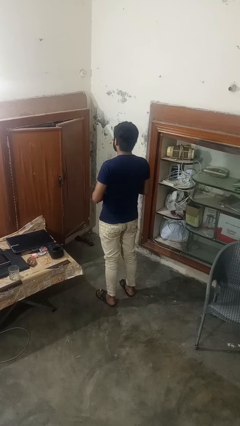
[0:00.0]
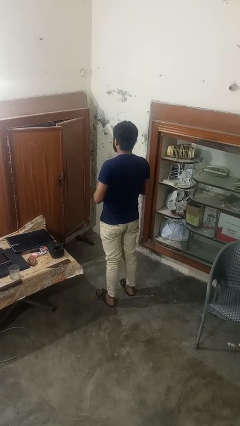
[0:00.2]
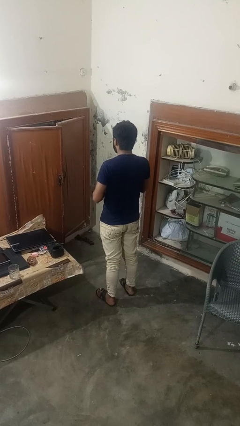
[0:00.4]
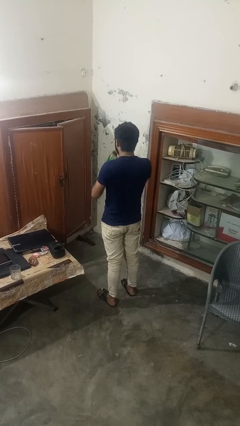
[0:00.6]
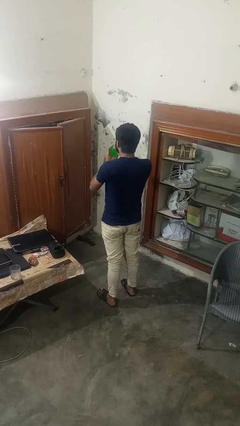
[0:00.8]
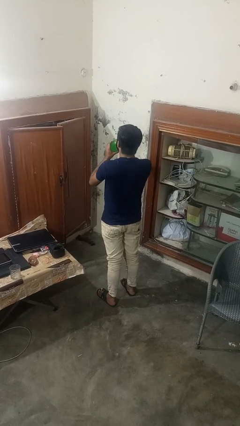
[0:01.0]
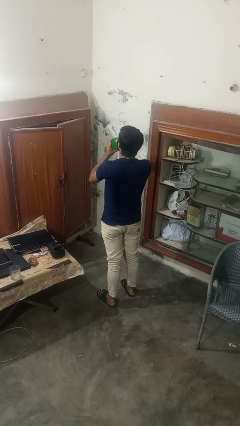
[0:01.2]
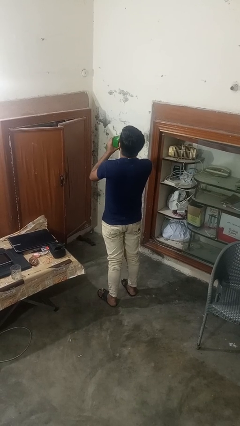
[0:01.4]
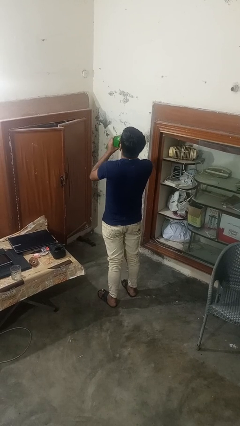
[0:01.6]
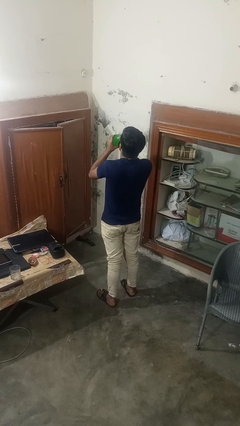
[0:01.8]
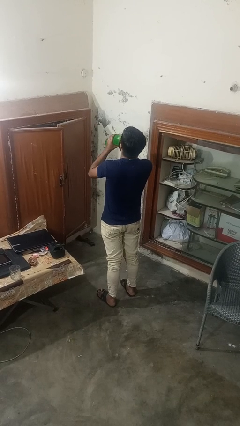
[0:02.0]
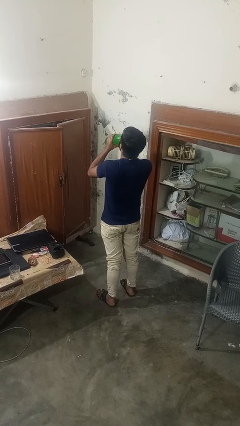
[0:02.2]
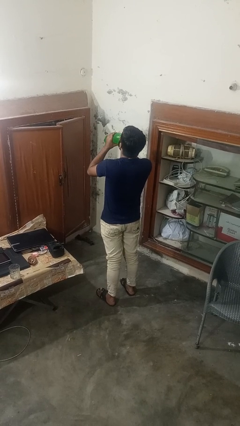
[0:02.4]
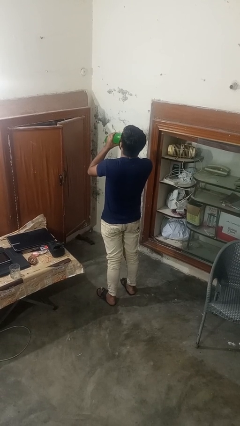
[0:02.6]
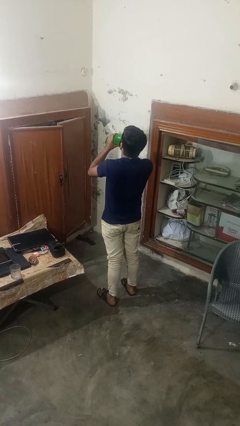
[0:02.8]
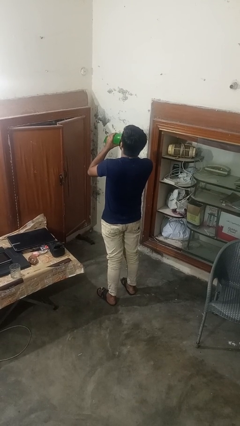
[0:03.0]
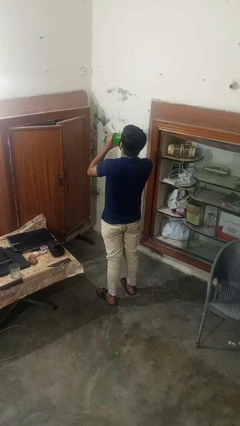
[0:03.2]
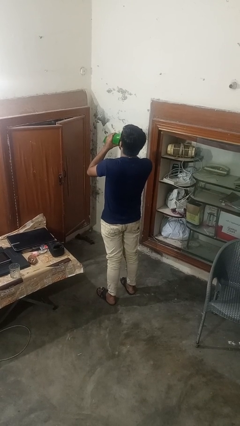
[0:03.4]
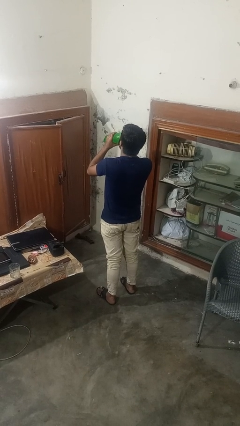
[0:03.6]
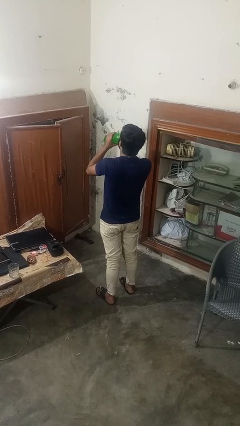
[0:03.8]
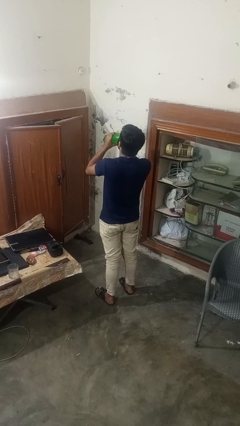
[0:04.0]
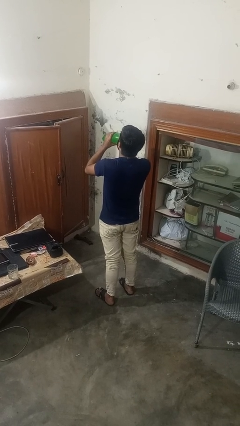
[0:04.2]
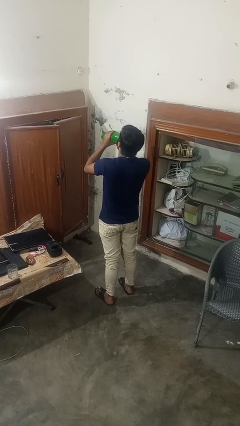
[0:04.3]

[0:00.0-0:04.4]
person drinks from bottle

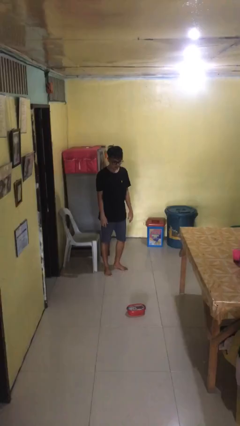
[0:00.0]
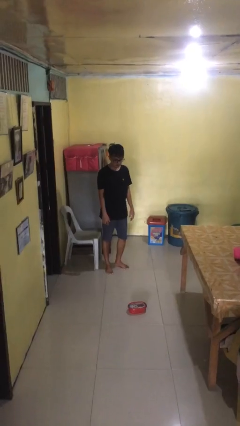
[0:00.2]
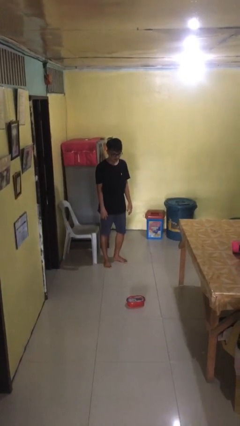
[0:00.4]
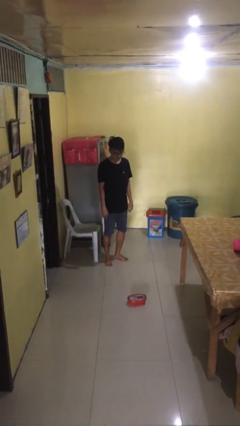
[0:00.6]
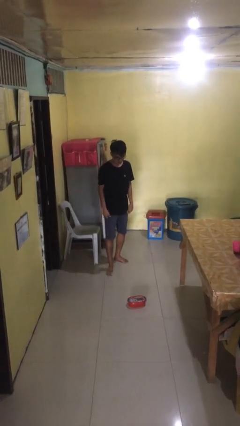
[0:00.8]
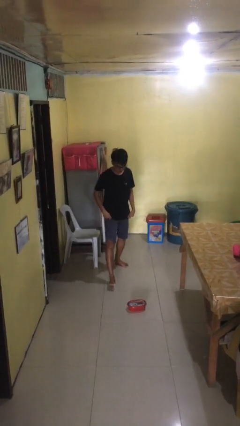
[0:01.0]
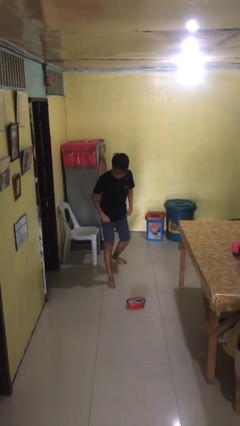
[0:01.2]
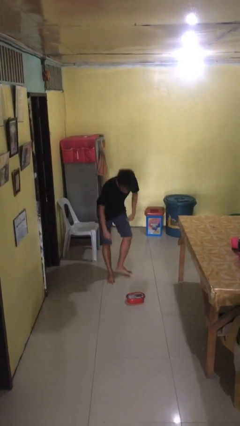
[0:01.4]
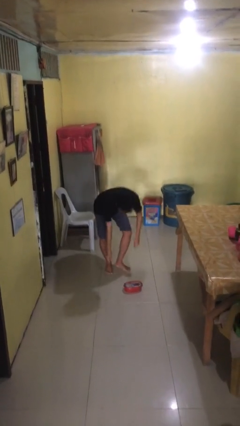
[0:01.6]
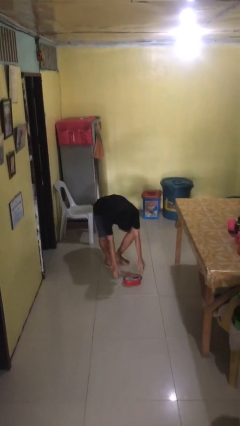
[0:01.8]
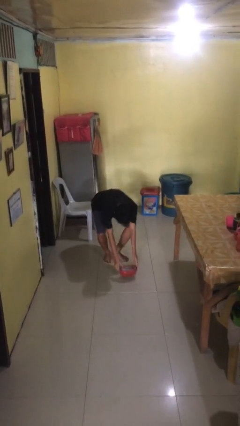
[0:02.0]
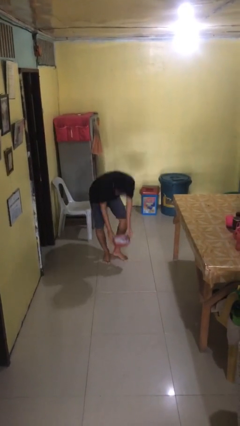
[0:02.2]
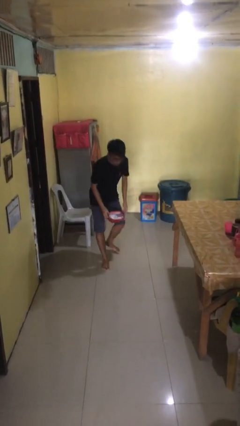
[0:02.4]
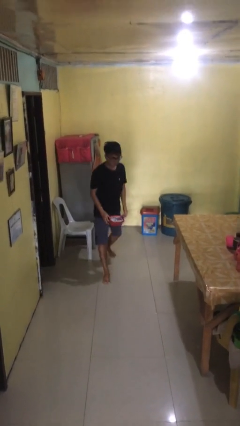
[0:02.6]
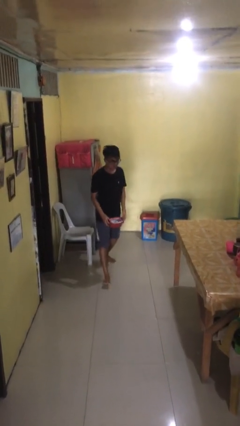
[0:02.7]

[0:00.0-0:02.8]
person picks up object from floor

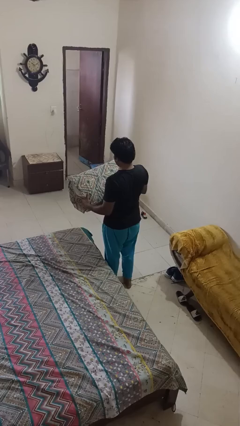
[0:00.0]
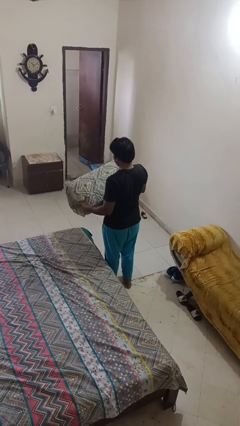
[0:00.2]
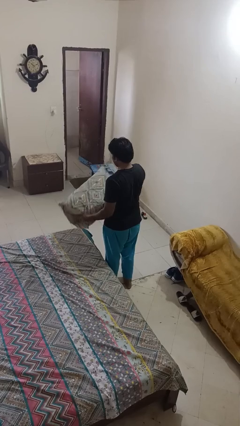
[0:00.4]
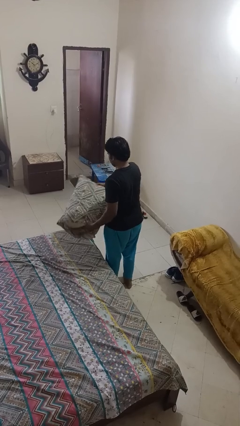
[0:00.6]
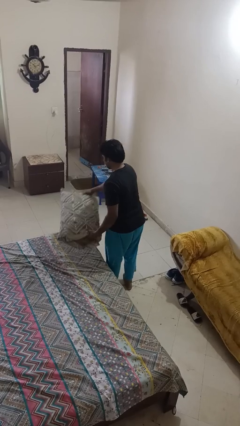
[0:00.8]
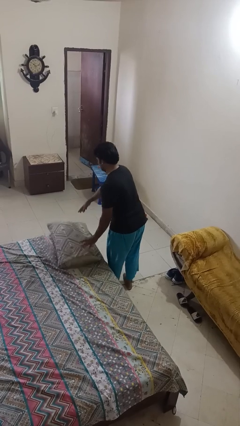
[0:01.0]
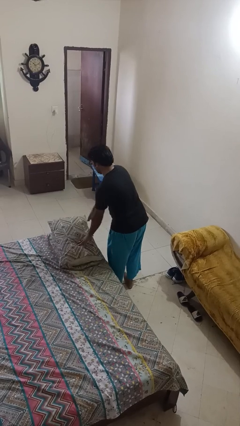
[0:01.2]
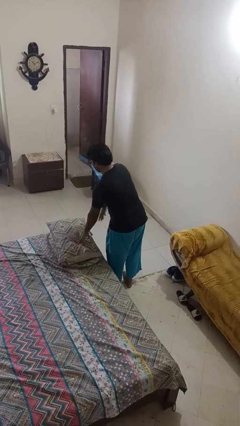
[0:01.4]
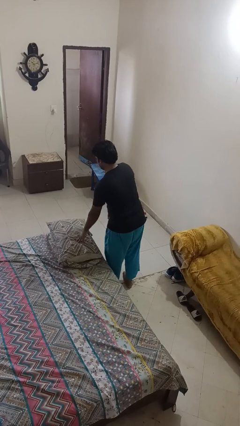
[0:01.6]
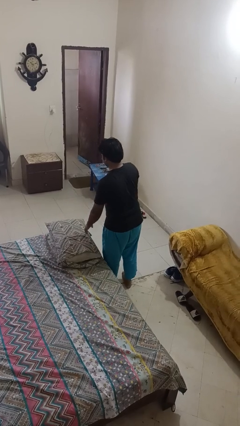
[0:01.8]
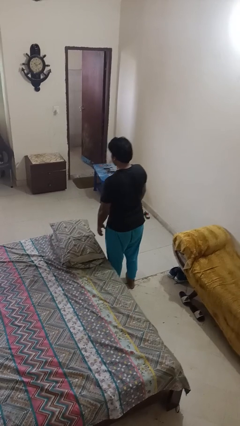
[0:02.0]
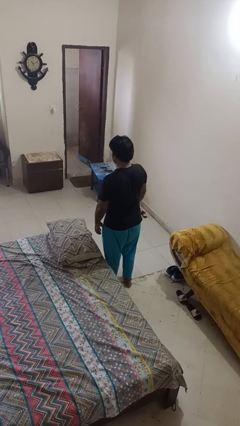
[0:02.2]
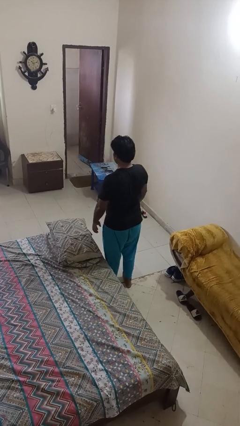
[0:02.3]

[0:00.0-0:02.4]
person puts down object on bed

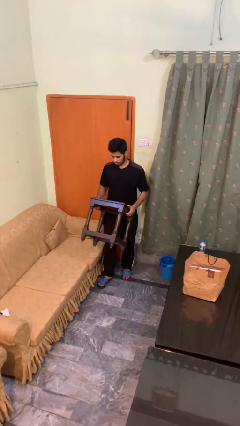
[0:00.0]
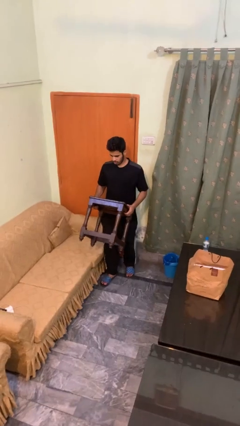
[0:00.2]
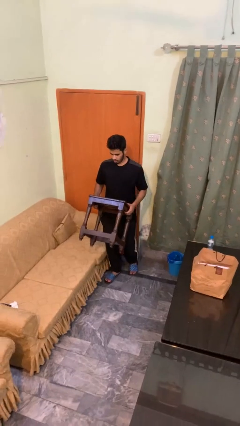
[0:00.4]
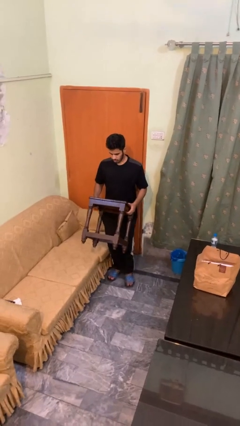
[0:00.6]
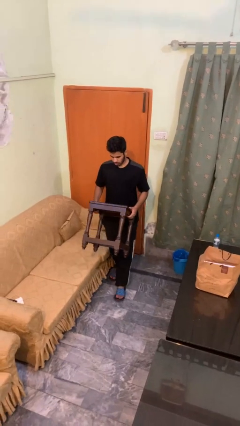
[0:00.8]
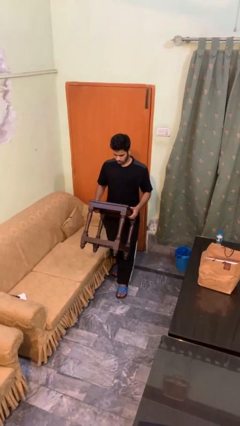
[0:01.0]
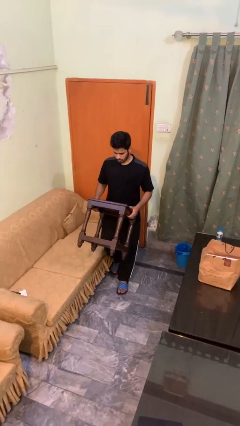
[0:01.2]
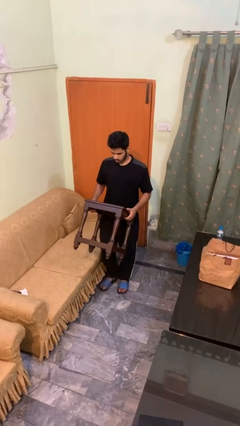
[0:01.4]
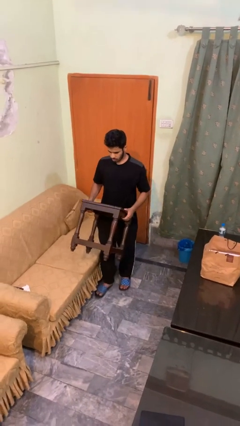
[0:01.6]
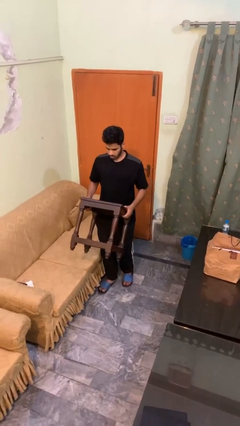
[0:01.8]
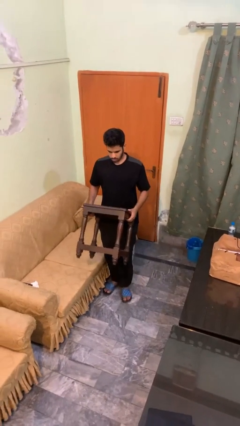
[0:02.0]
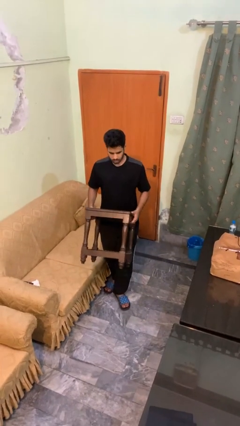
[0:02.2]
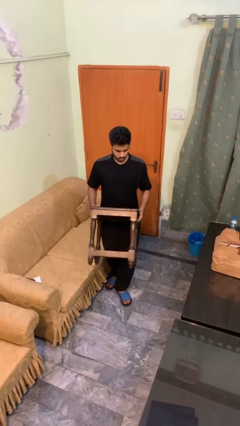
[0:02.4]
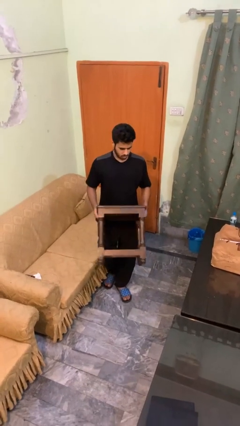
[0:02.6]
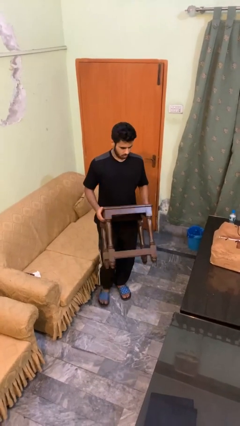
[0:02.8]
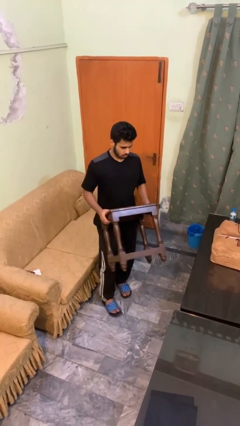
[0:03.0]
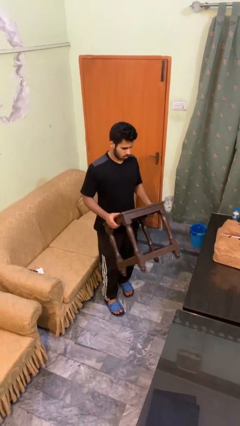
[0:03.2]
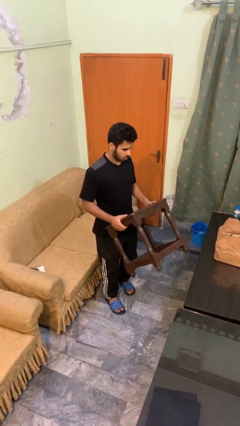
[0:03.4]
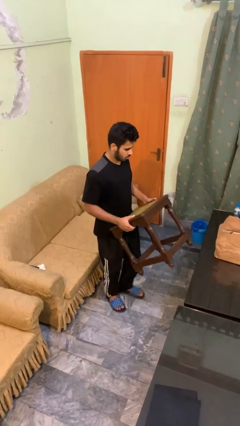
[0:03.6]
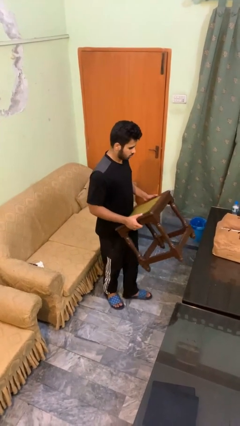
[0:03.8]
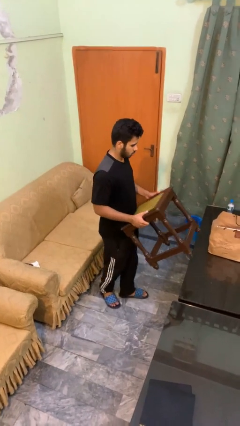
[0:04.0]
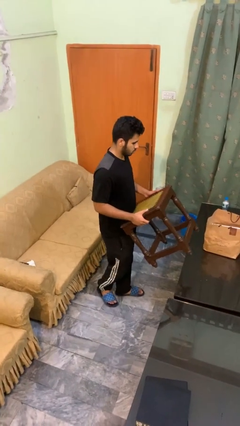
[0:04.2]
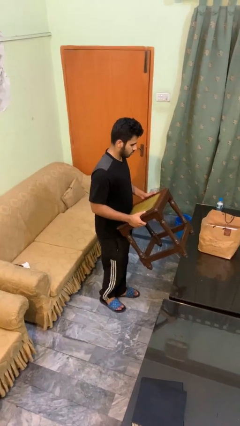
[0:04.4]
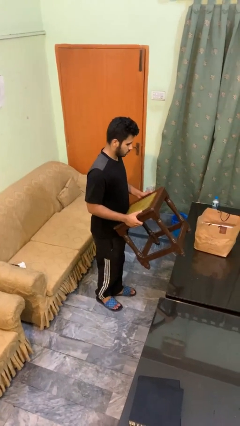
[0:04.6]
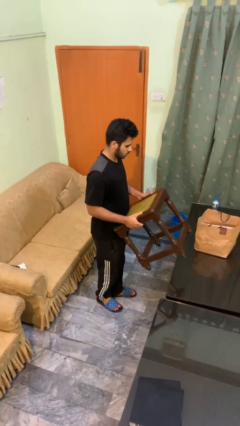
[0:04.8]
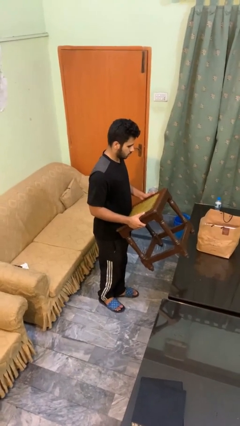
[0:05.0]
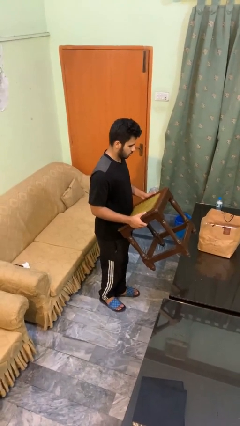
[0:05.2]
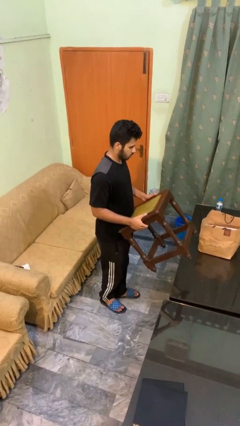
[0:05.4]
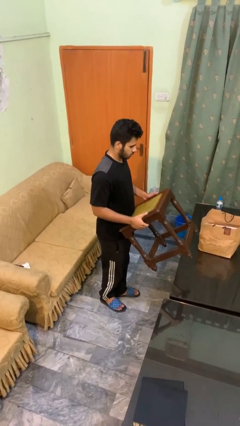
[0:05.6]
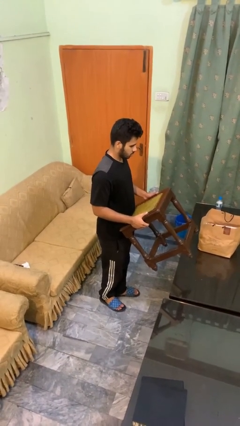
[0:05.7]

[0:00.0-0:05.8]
person carries furniture

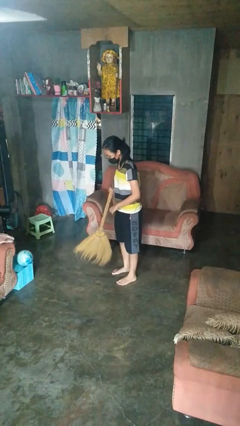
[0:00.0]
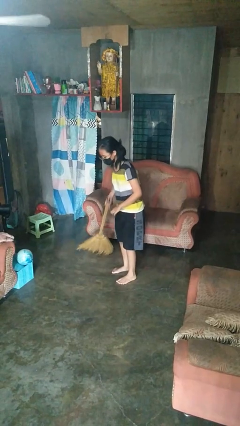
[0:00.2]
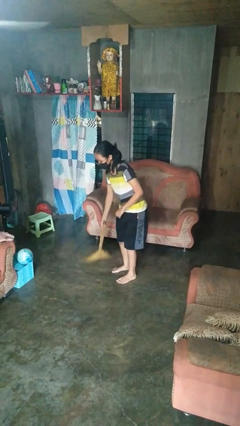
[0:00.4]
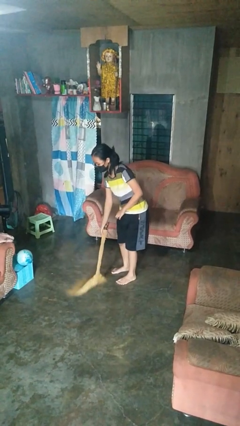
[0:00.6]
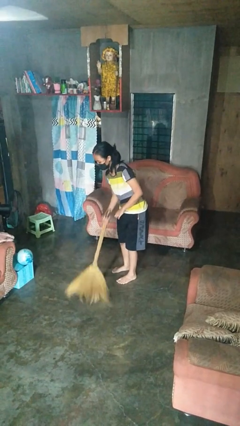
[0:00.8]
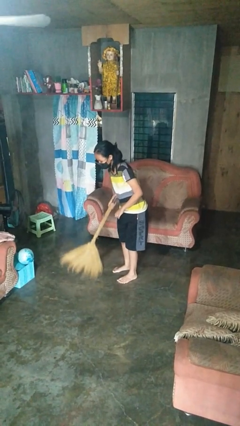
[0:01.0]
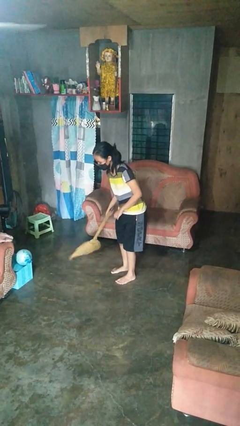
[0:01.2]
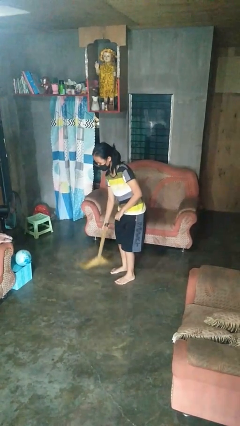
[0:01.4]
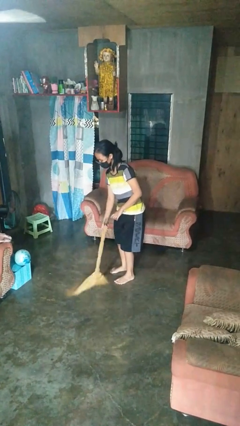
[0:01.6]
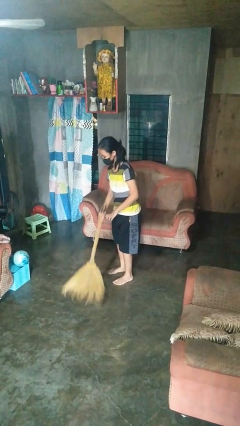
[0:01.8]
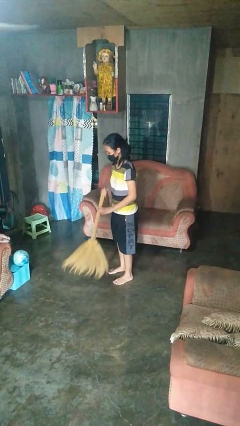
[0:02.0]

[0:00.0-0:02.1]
person sweeps floor
